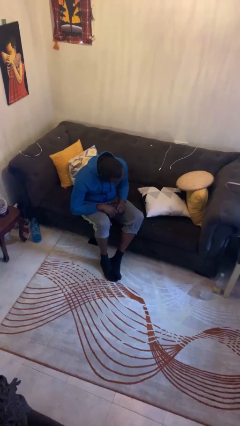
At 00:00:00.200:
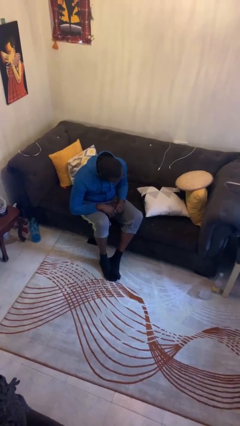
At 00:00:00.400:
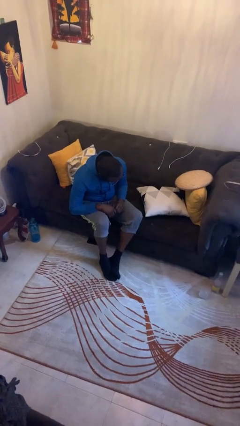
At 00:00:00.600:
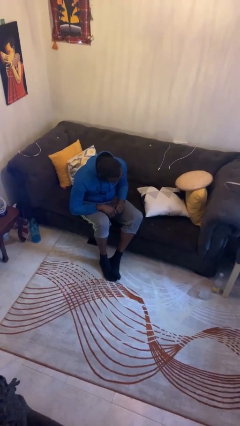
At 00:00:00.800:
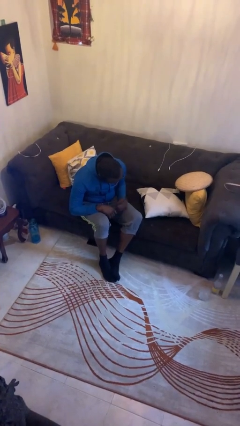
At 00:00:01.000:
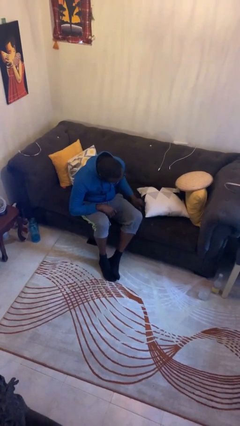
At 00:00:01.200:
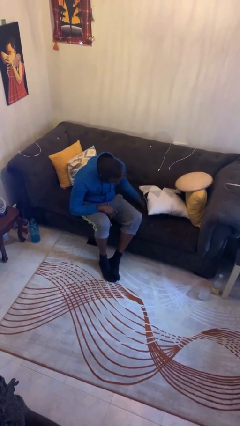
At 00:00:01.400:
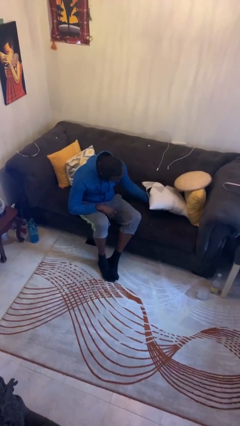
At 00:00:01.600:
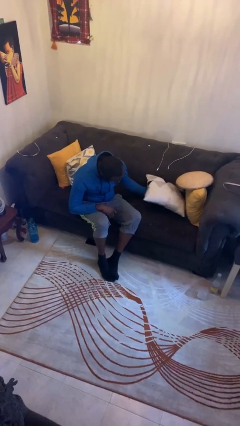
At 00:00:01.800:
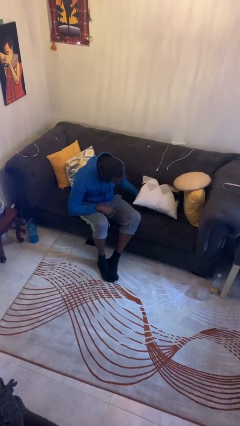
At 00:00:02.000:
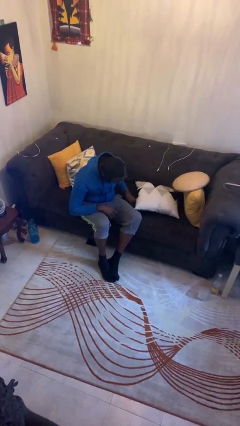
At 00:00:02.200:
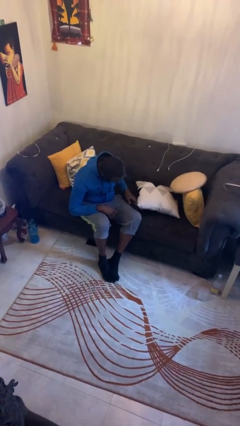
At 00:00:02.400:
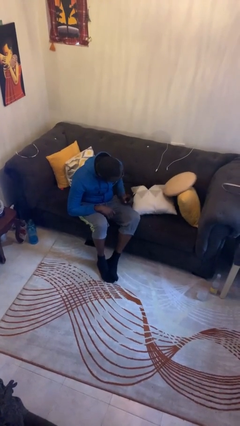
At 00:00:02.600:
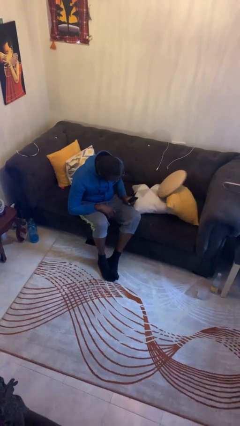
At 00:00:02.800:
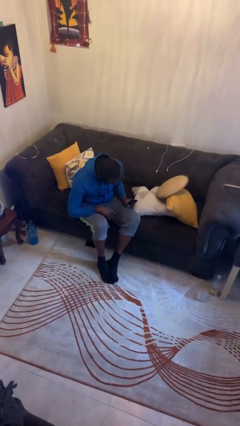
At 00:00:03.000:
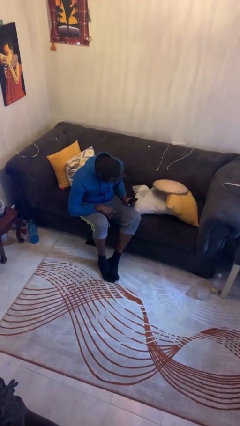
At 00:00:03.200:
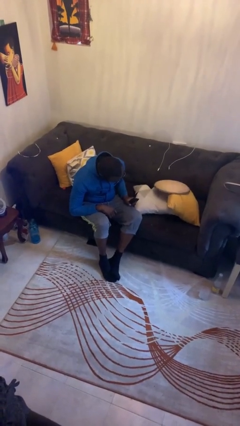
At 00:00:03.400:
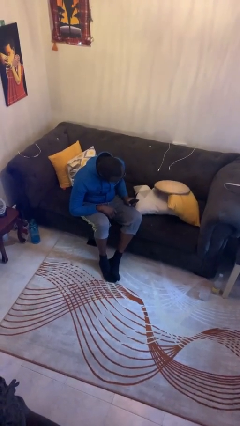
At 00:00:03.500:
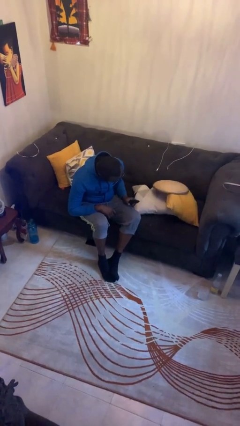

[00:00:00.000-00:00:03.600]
person searches in couch

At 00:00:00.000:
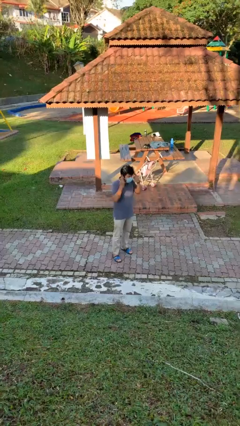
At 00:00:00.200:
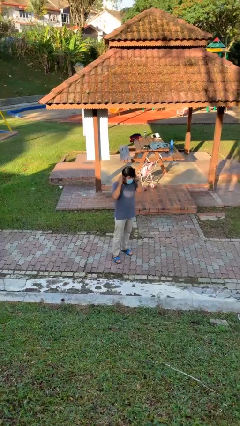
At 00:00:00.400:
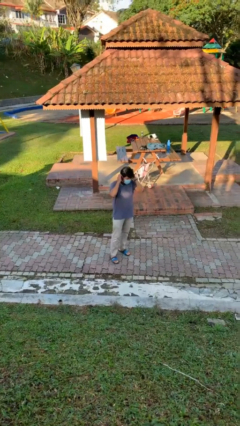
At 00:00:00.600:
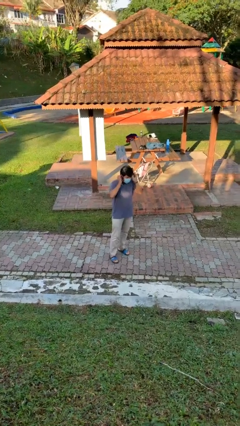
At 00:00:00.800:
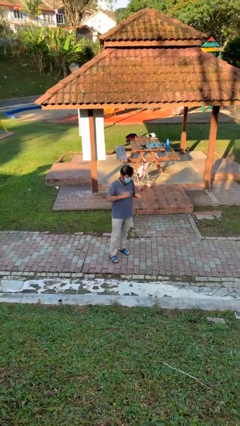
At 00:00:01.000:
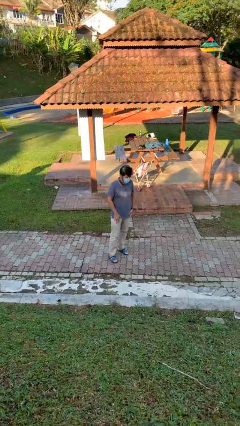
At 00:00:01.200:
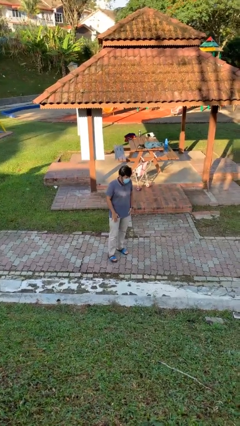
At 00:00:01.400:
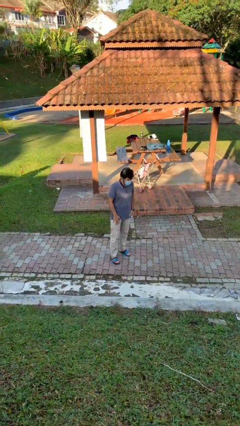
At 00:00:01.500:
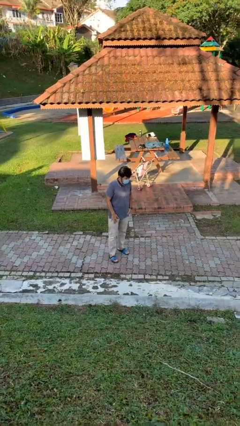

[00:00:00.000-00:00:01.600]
person puts on facemask

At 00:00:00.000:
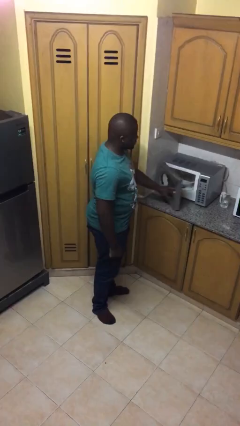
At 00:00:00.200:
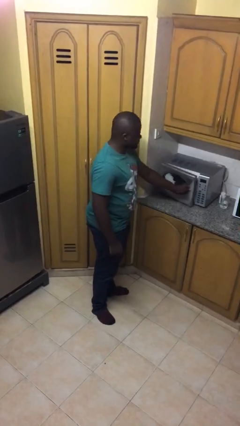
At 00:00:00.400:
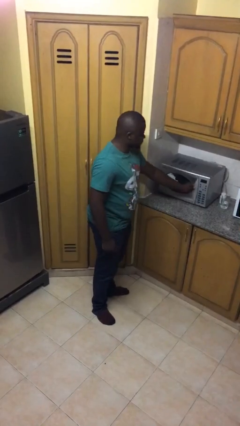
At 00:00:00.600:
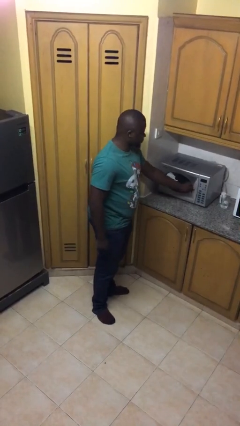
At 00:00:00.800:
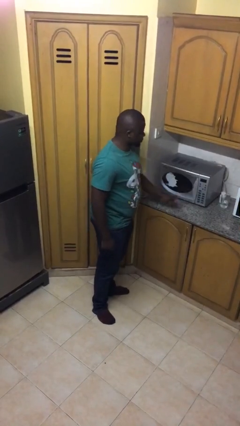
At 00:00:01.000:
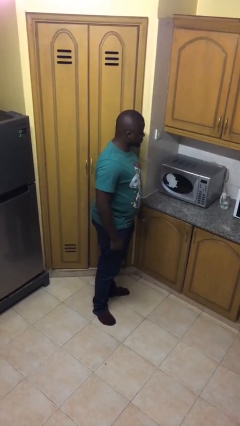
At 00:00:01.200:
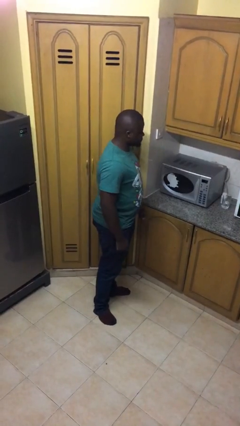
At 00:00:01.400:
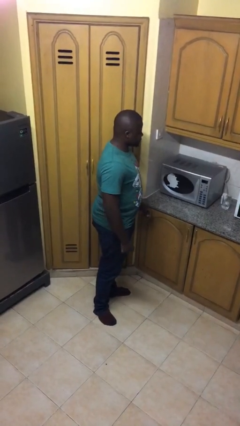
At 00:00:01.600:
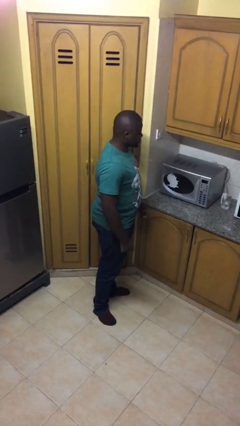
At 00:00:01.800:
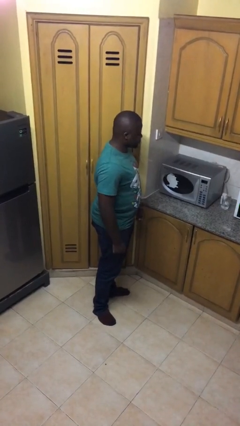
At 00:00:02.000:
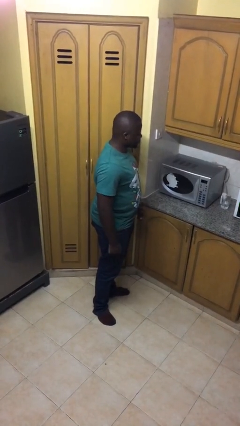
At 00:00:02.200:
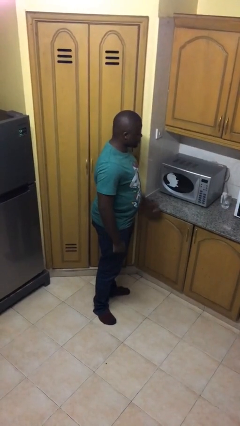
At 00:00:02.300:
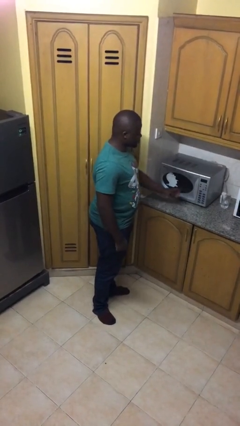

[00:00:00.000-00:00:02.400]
person closes microwave

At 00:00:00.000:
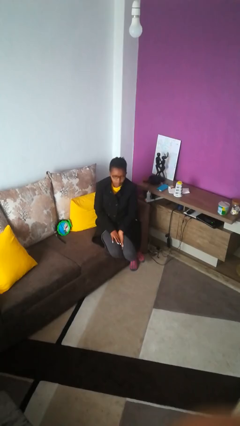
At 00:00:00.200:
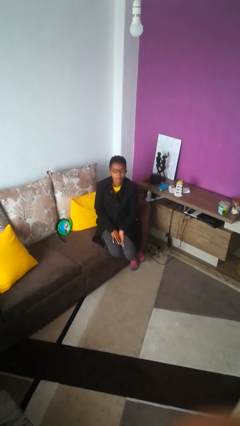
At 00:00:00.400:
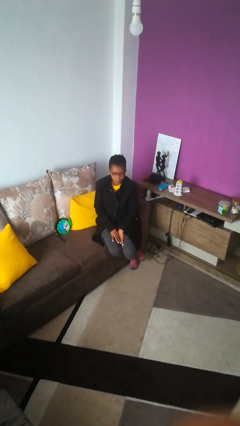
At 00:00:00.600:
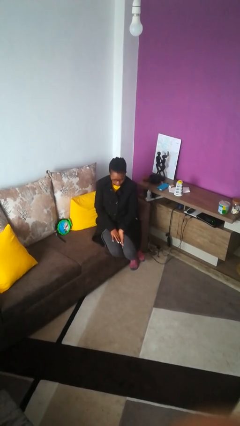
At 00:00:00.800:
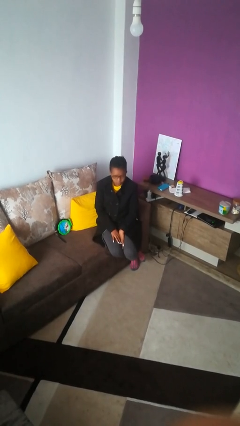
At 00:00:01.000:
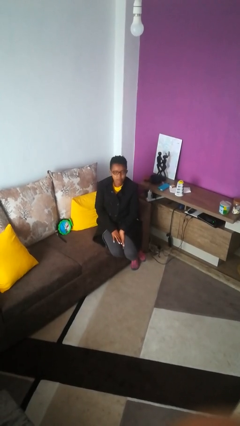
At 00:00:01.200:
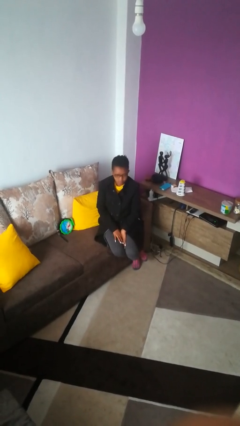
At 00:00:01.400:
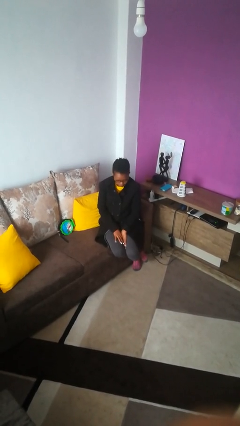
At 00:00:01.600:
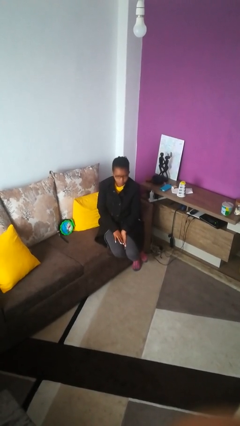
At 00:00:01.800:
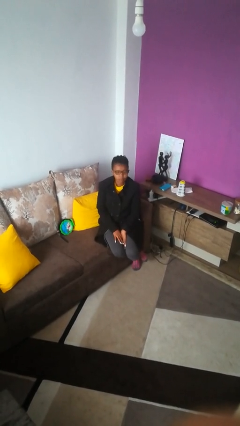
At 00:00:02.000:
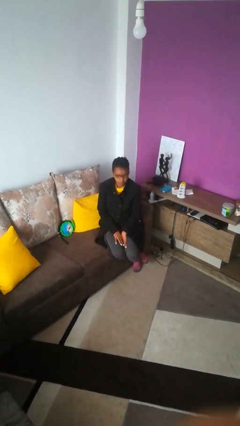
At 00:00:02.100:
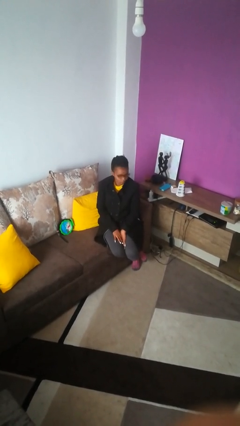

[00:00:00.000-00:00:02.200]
person nods head

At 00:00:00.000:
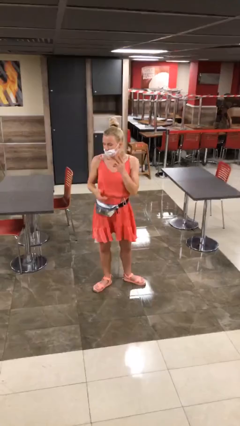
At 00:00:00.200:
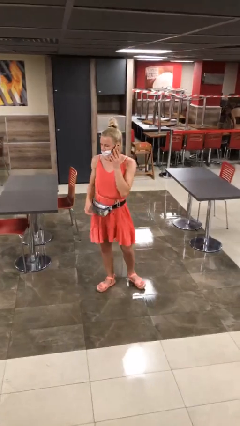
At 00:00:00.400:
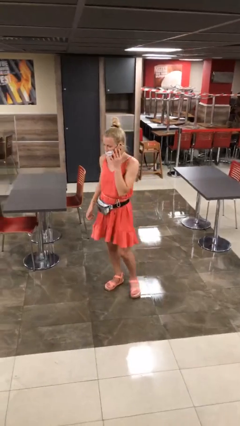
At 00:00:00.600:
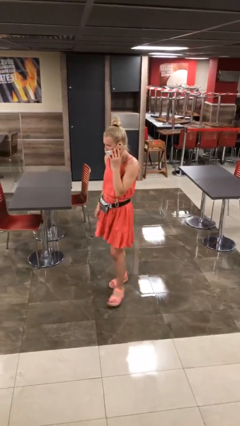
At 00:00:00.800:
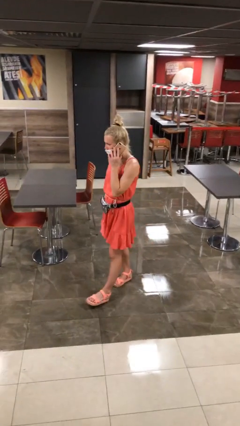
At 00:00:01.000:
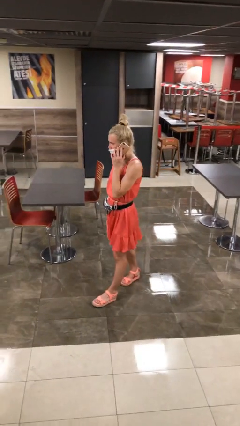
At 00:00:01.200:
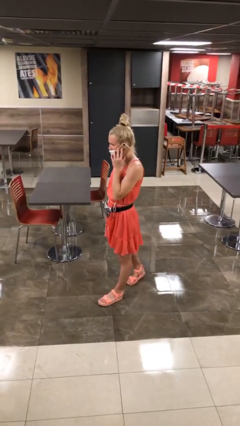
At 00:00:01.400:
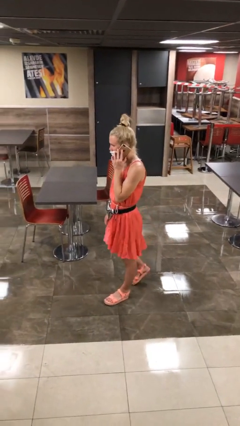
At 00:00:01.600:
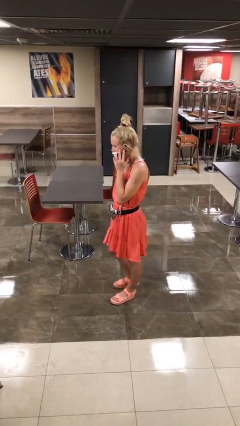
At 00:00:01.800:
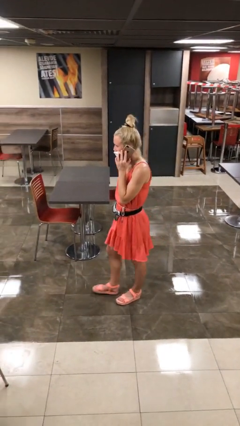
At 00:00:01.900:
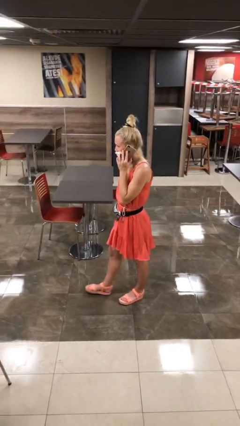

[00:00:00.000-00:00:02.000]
person talks on phone

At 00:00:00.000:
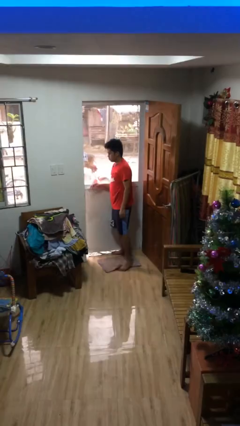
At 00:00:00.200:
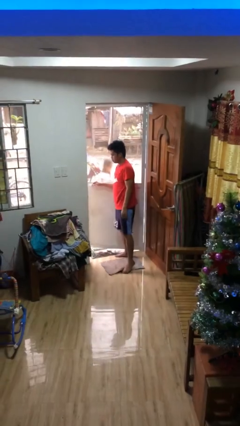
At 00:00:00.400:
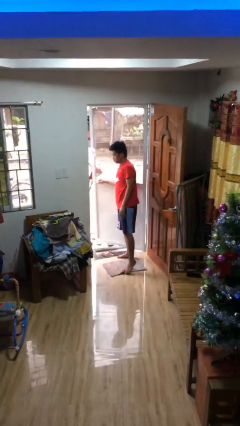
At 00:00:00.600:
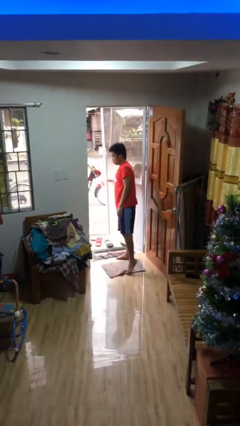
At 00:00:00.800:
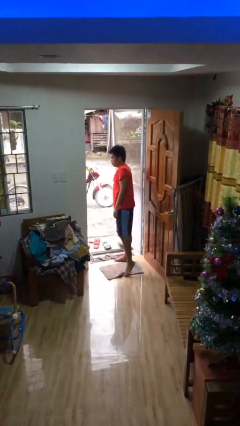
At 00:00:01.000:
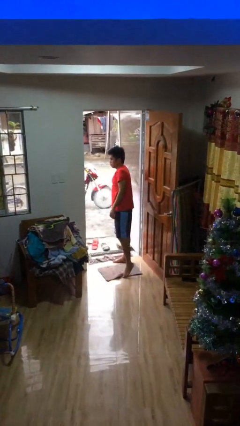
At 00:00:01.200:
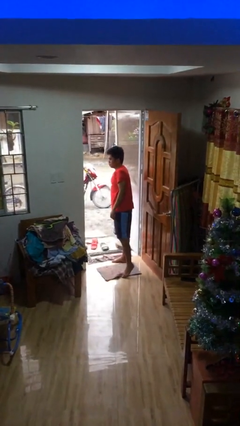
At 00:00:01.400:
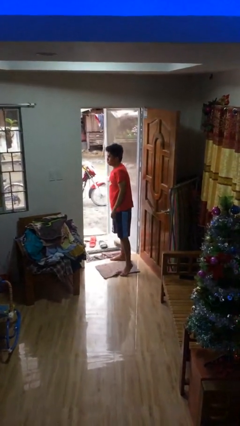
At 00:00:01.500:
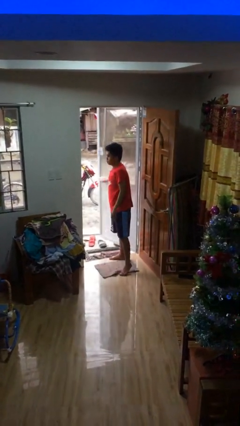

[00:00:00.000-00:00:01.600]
person opens facility door

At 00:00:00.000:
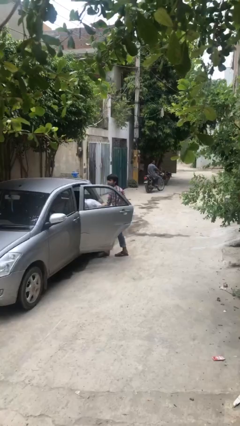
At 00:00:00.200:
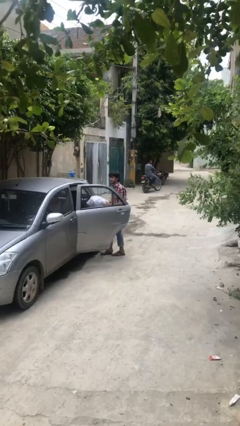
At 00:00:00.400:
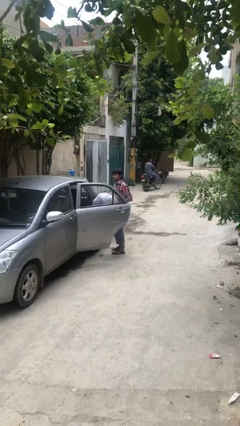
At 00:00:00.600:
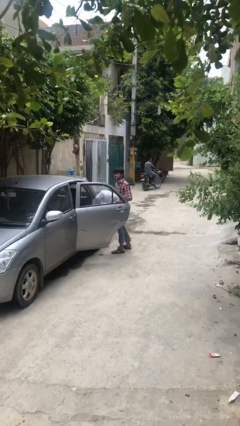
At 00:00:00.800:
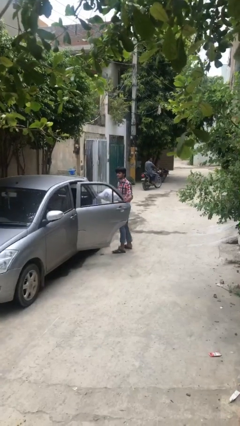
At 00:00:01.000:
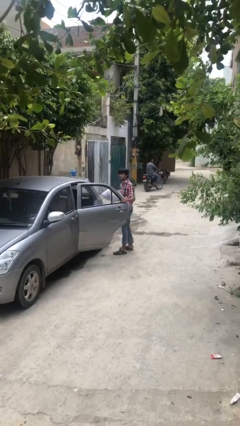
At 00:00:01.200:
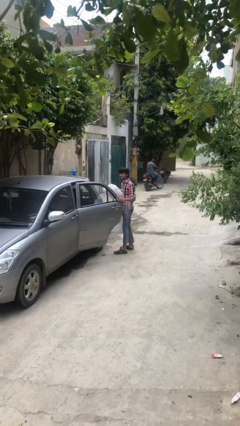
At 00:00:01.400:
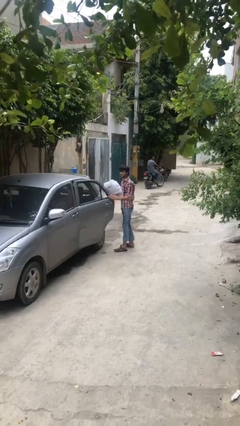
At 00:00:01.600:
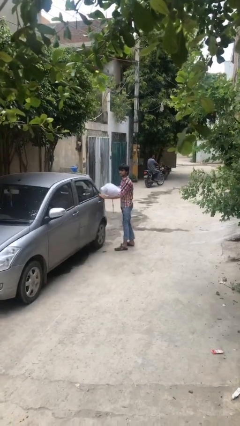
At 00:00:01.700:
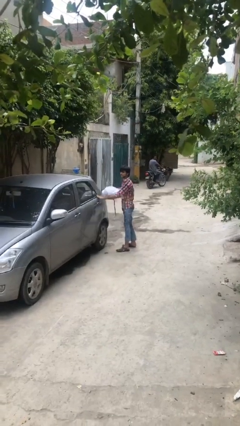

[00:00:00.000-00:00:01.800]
person closes car door

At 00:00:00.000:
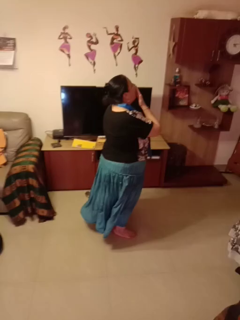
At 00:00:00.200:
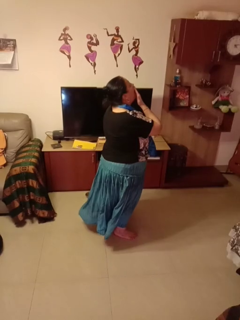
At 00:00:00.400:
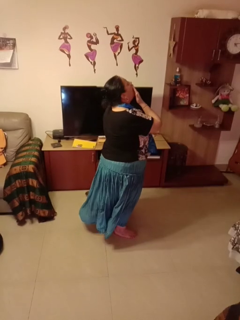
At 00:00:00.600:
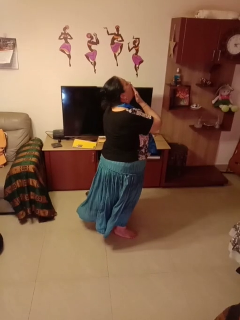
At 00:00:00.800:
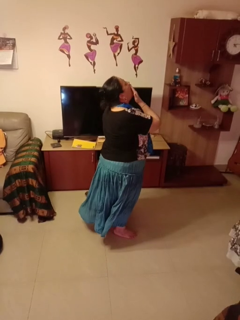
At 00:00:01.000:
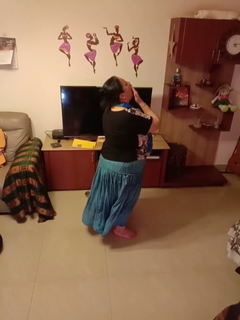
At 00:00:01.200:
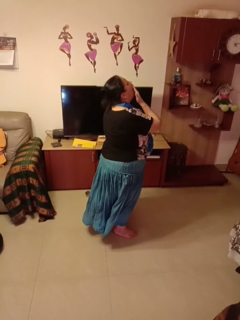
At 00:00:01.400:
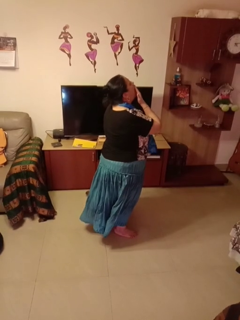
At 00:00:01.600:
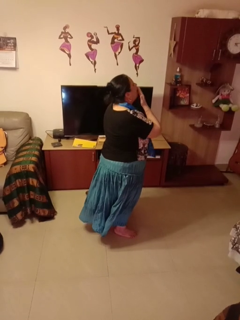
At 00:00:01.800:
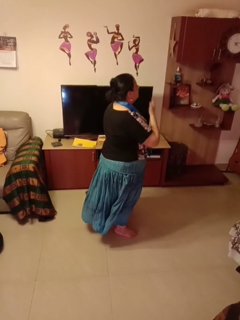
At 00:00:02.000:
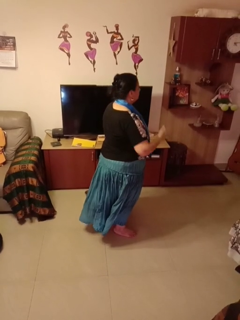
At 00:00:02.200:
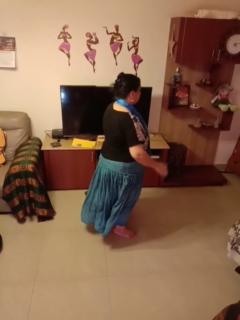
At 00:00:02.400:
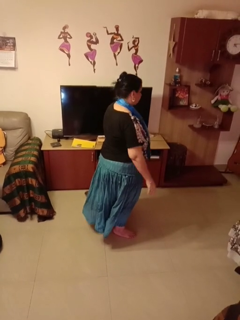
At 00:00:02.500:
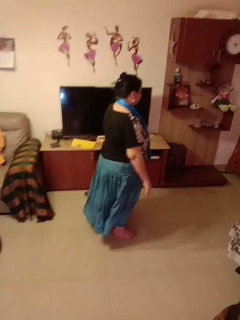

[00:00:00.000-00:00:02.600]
person yawns
